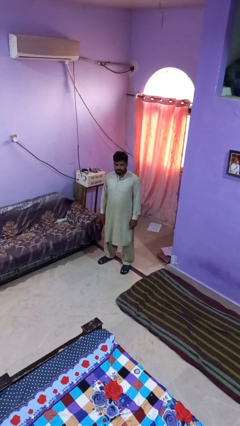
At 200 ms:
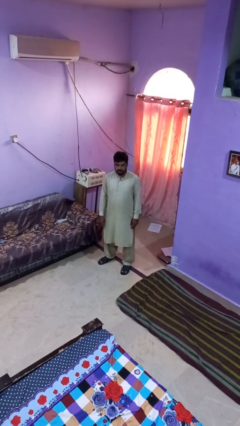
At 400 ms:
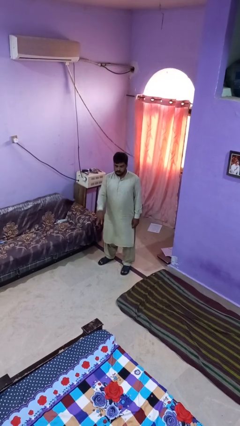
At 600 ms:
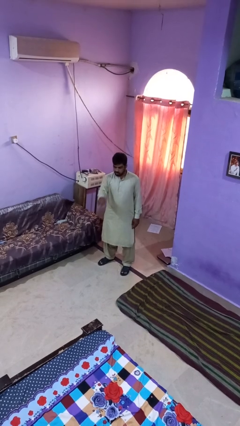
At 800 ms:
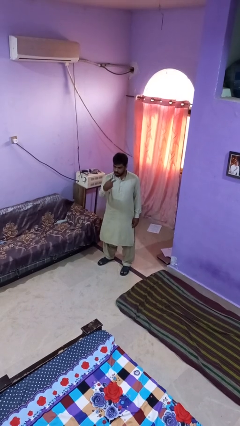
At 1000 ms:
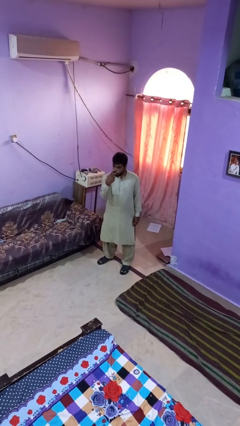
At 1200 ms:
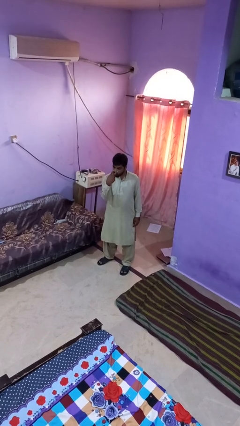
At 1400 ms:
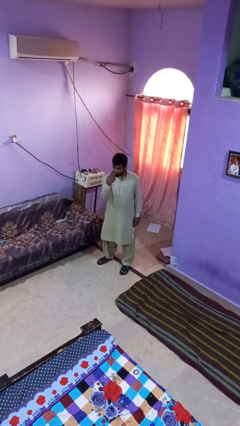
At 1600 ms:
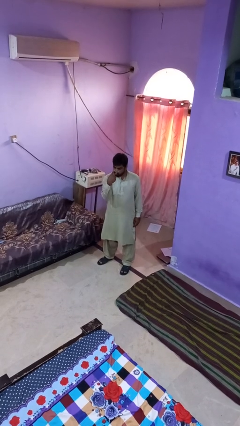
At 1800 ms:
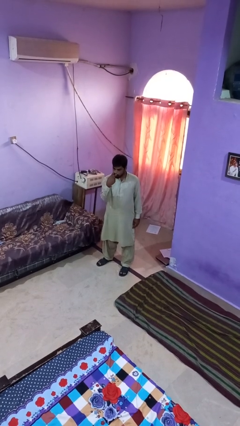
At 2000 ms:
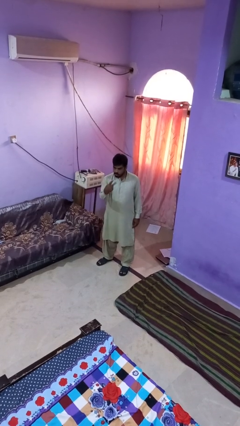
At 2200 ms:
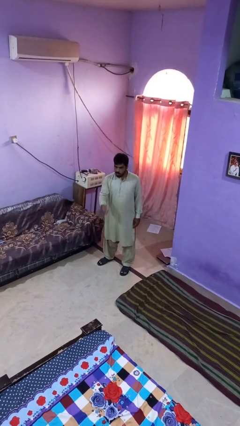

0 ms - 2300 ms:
person gestures watch closely

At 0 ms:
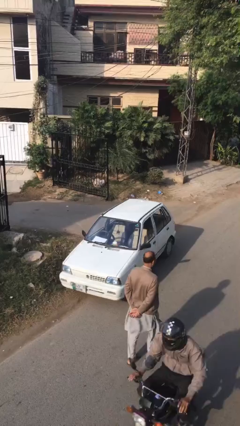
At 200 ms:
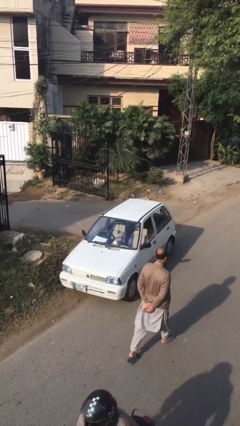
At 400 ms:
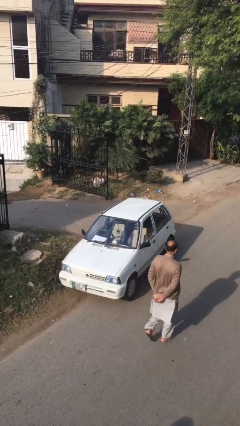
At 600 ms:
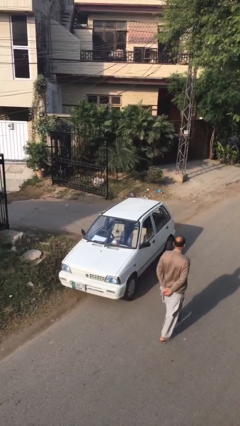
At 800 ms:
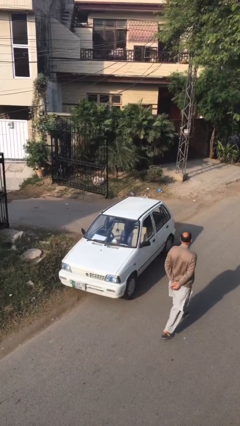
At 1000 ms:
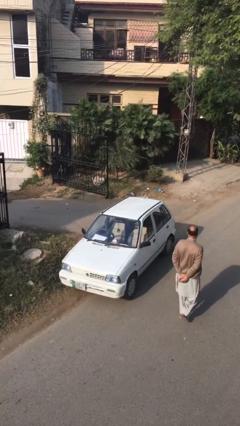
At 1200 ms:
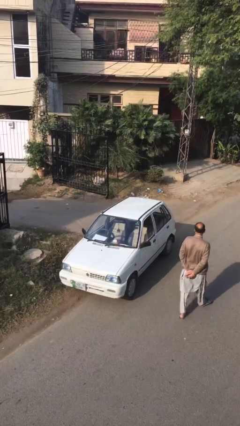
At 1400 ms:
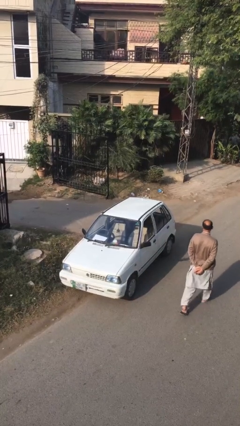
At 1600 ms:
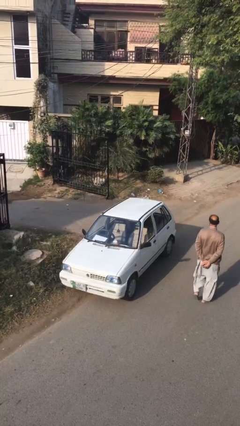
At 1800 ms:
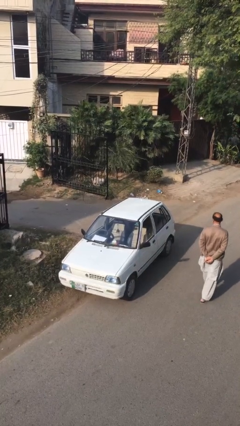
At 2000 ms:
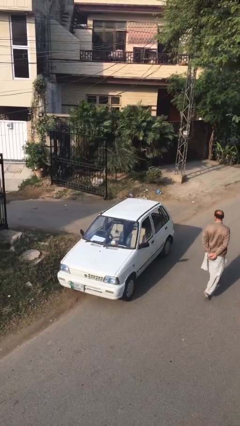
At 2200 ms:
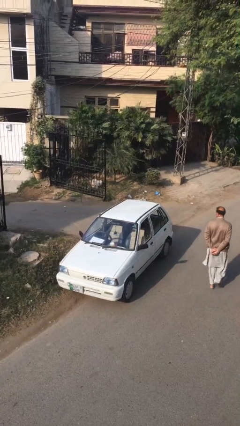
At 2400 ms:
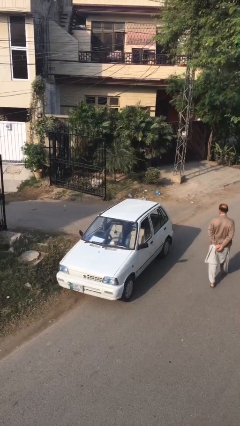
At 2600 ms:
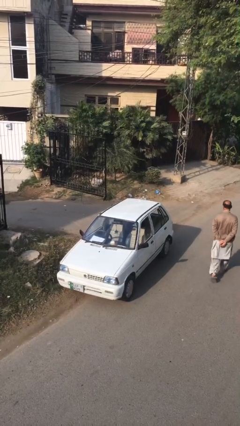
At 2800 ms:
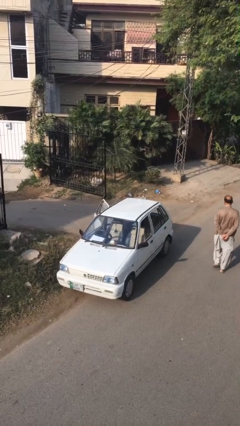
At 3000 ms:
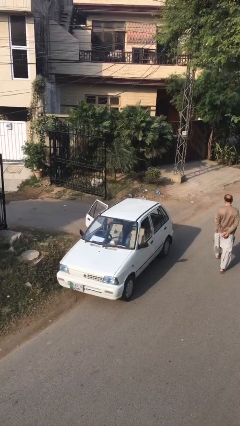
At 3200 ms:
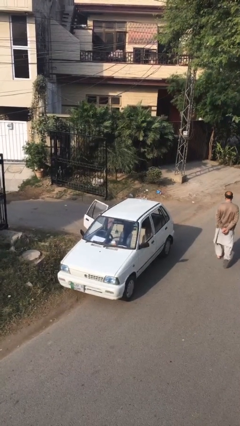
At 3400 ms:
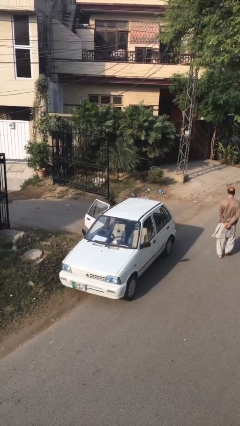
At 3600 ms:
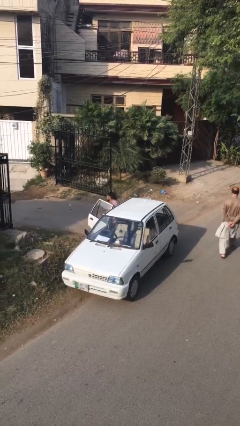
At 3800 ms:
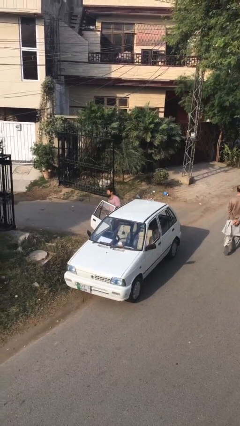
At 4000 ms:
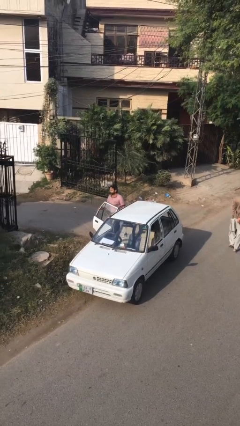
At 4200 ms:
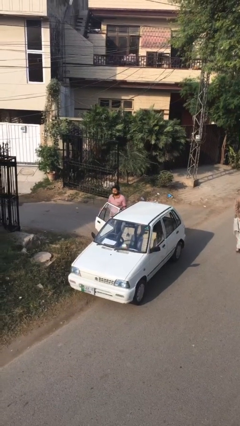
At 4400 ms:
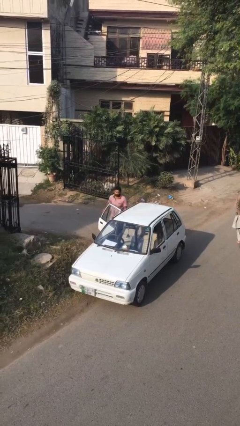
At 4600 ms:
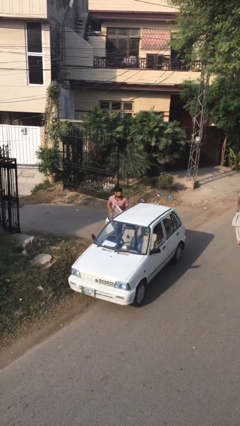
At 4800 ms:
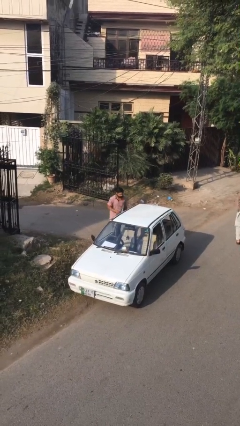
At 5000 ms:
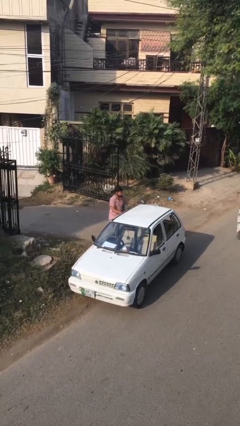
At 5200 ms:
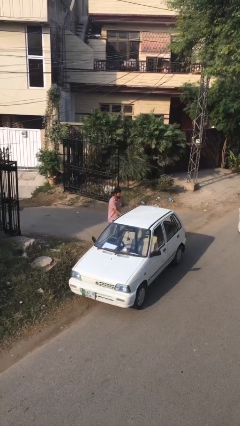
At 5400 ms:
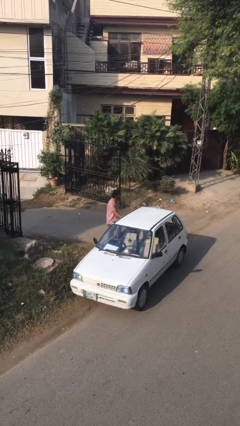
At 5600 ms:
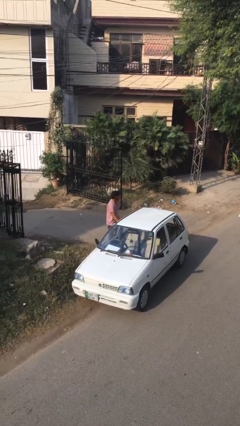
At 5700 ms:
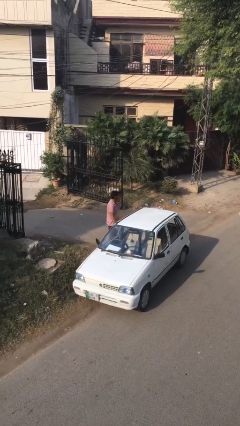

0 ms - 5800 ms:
person exits car

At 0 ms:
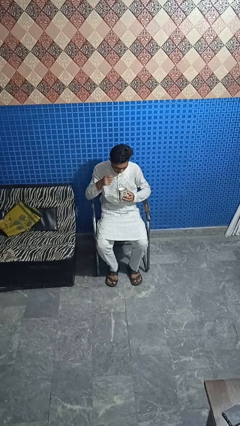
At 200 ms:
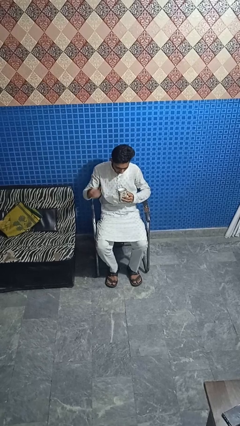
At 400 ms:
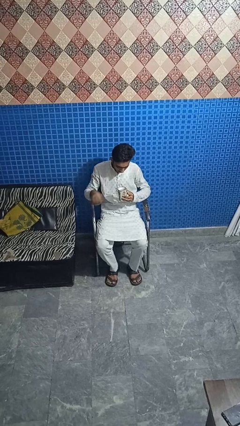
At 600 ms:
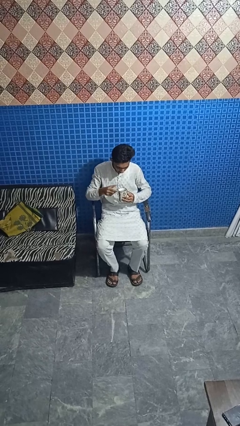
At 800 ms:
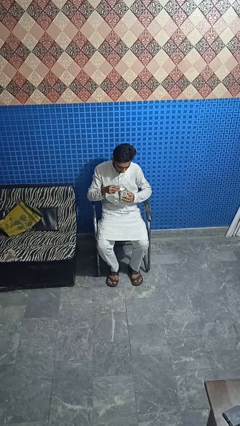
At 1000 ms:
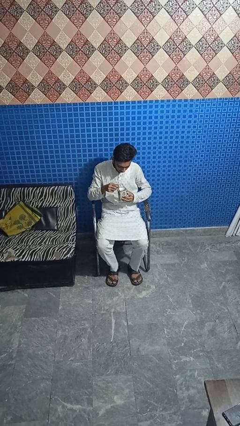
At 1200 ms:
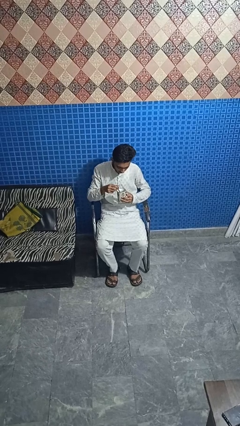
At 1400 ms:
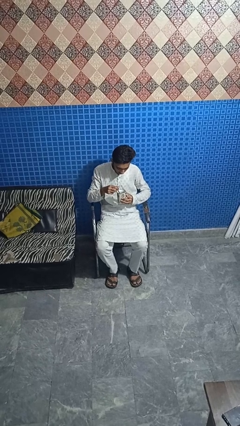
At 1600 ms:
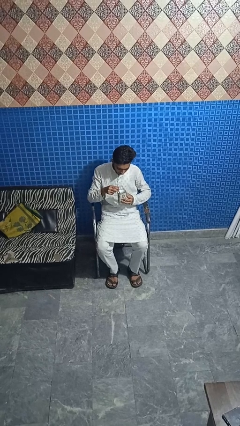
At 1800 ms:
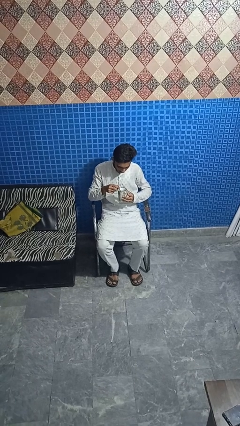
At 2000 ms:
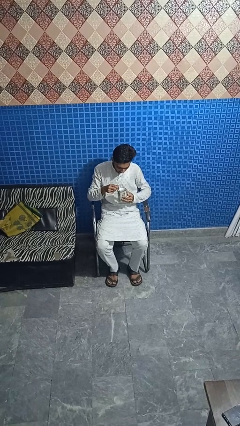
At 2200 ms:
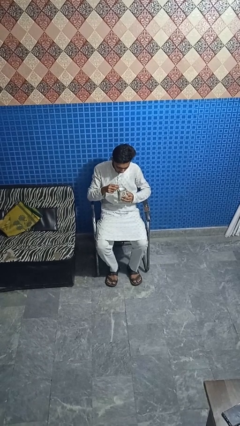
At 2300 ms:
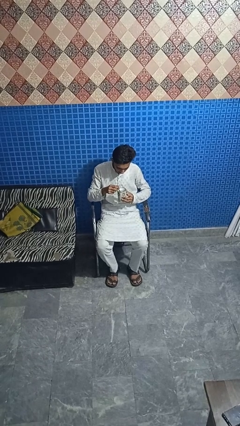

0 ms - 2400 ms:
person stirs mug

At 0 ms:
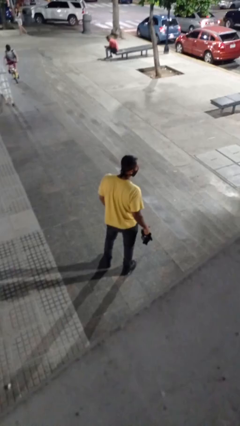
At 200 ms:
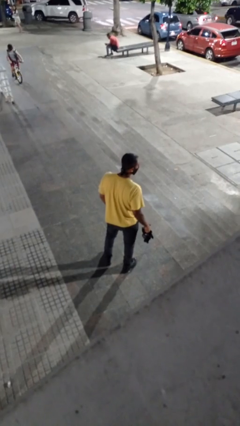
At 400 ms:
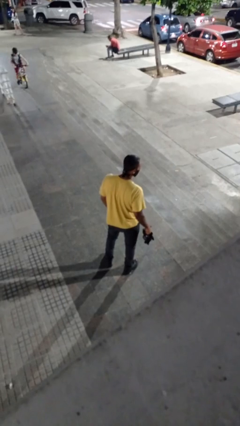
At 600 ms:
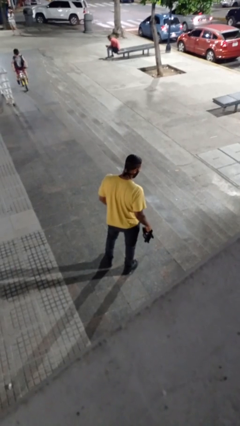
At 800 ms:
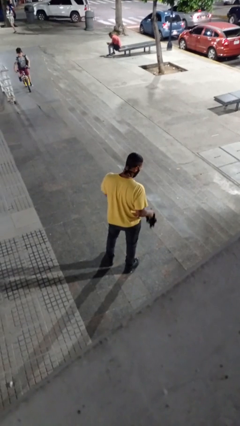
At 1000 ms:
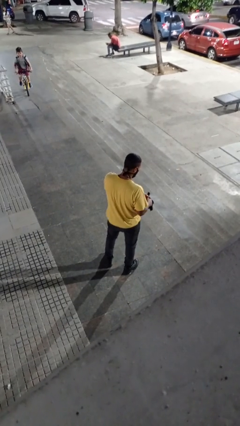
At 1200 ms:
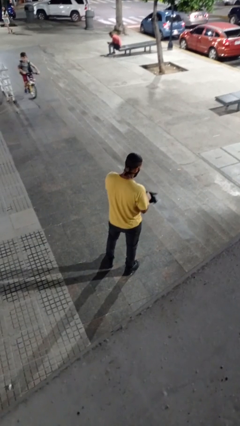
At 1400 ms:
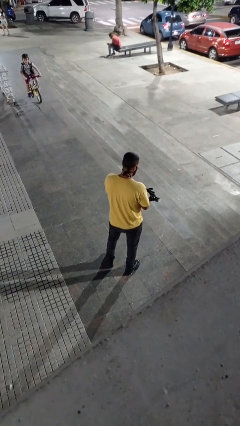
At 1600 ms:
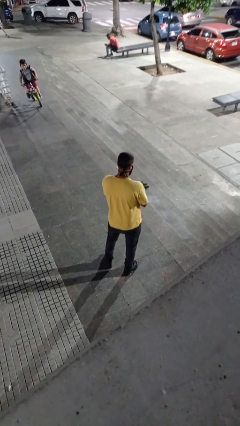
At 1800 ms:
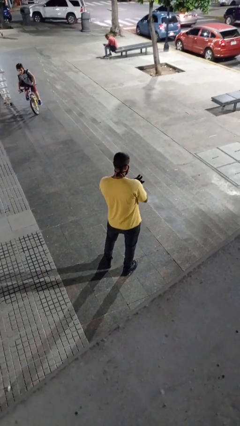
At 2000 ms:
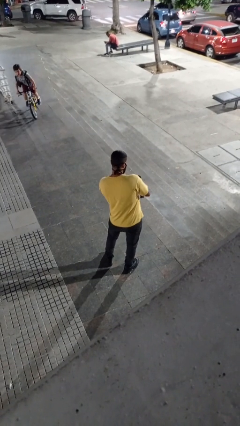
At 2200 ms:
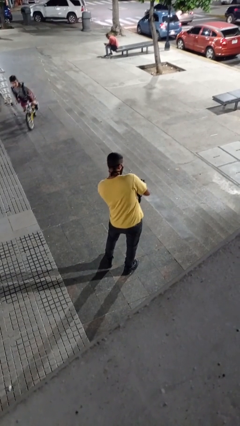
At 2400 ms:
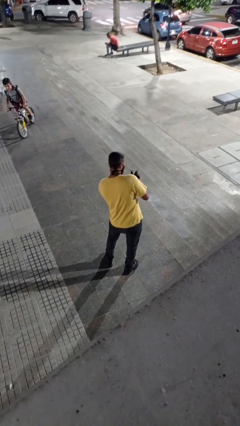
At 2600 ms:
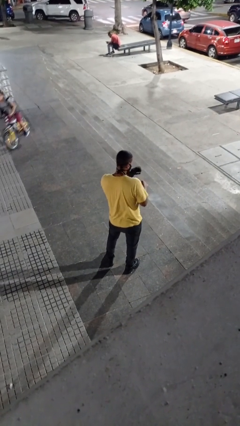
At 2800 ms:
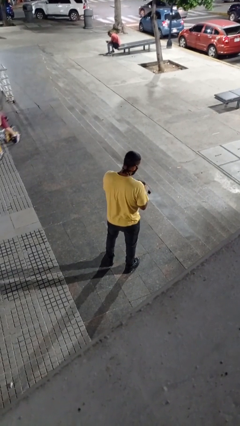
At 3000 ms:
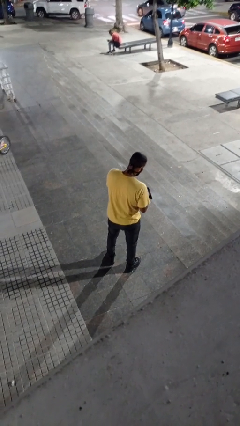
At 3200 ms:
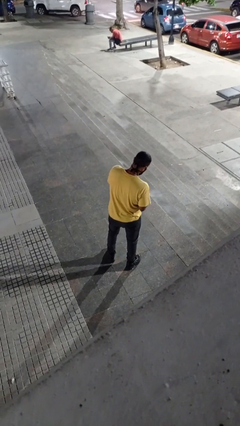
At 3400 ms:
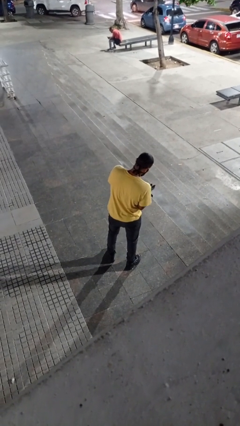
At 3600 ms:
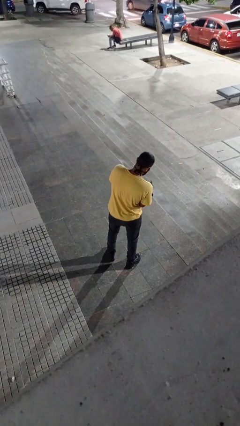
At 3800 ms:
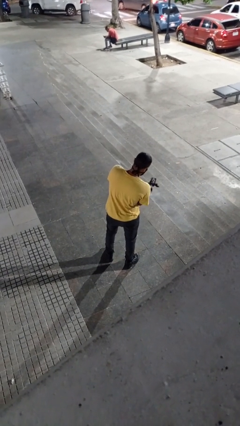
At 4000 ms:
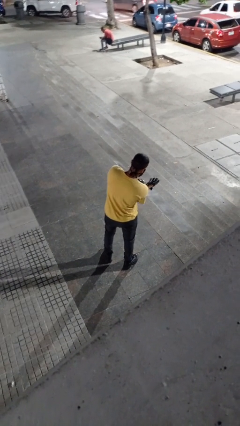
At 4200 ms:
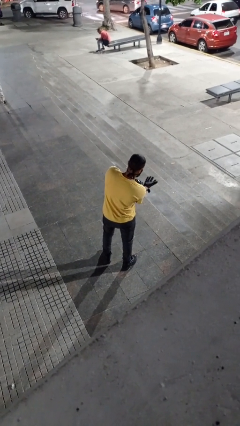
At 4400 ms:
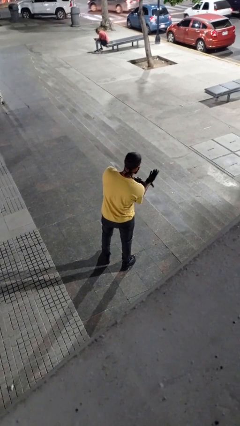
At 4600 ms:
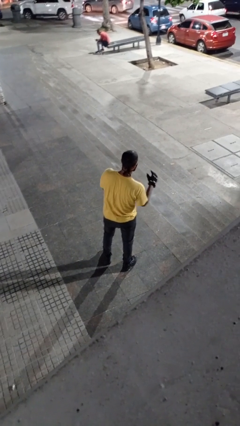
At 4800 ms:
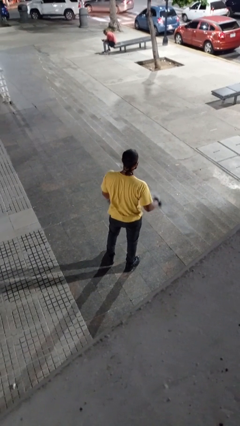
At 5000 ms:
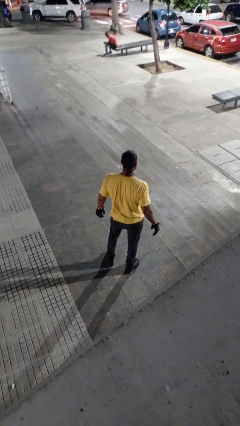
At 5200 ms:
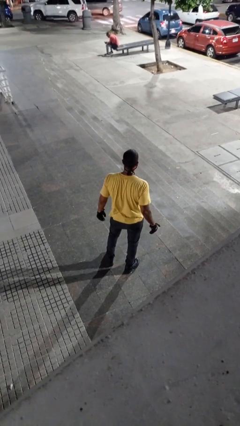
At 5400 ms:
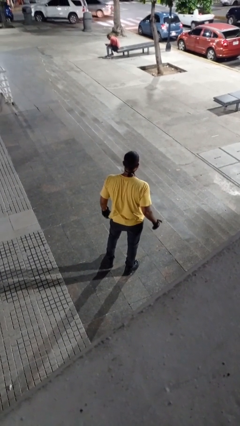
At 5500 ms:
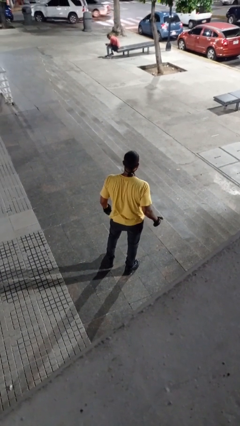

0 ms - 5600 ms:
person puts on gloves

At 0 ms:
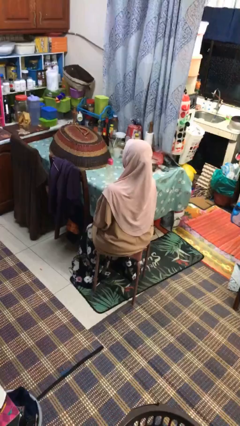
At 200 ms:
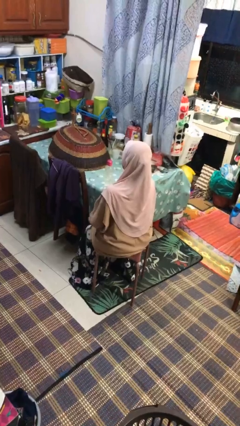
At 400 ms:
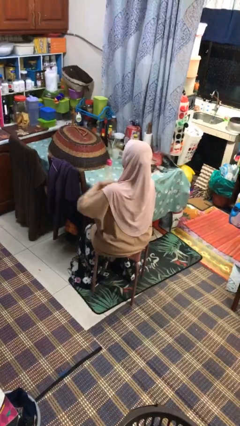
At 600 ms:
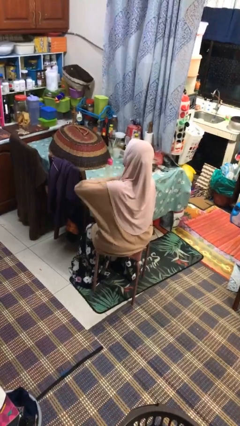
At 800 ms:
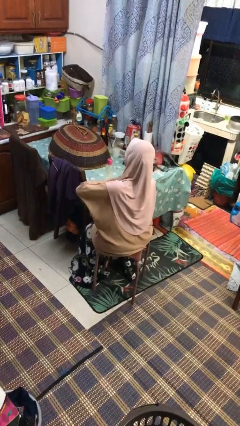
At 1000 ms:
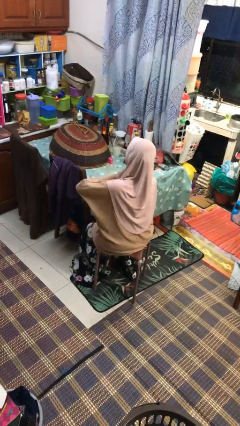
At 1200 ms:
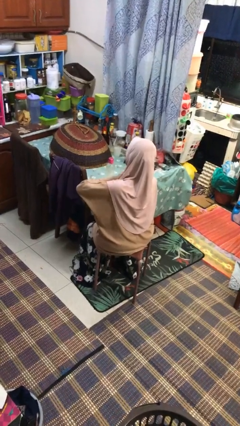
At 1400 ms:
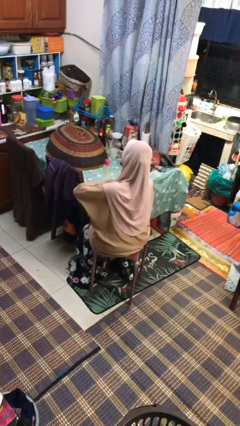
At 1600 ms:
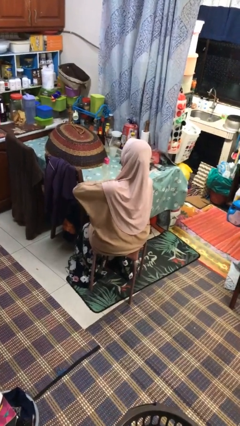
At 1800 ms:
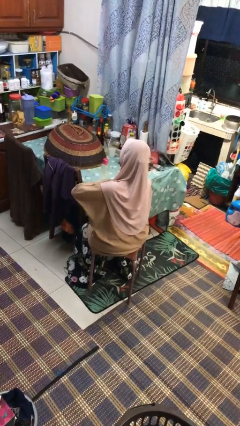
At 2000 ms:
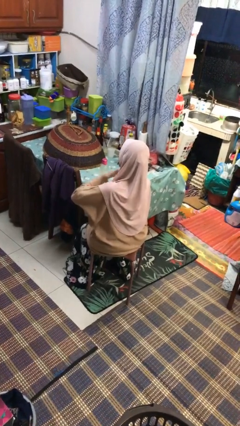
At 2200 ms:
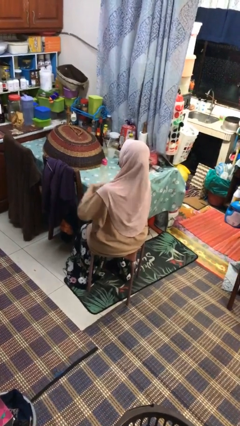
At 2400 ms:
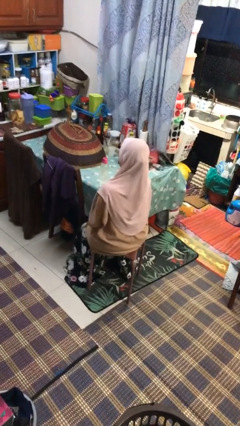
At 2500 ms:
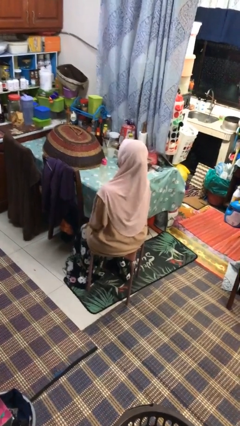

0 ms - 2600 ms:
person drums on chest
